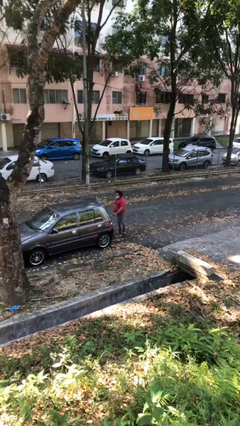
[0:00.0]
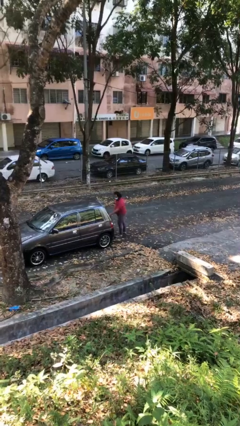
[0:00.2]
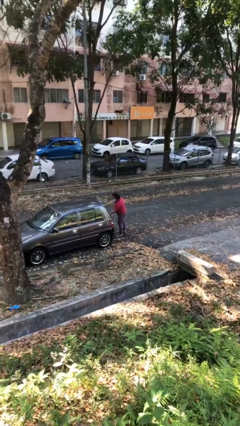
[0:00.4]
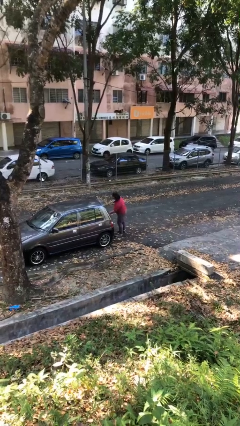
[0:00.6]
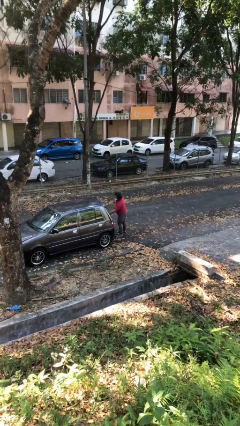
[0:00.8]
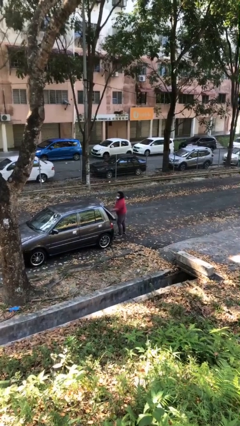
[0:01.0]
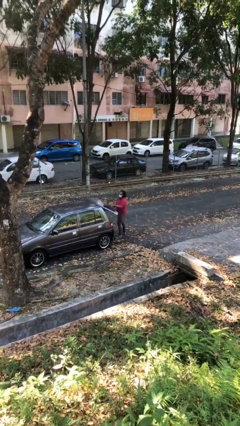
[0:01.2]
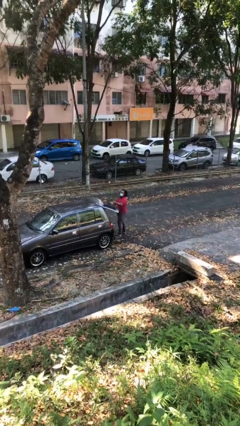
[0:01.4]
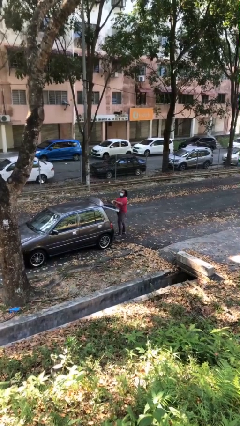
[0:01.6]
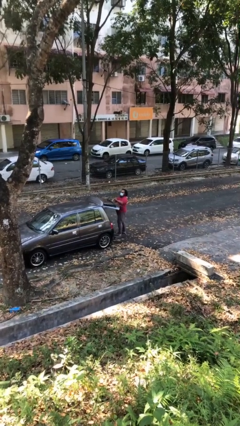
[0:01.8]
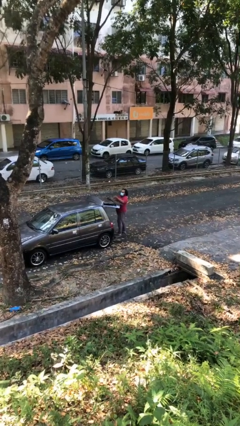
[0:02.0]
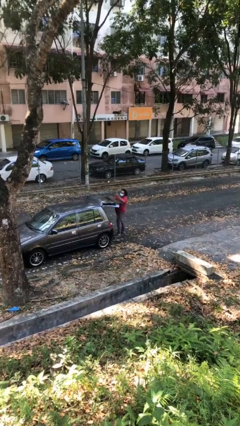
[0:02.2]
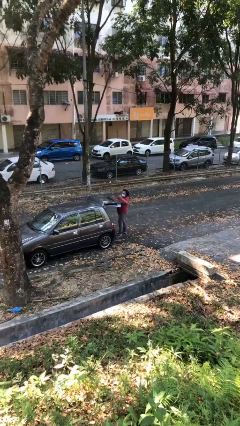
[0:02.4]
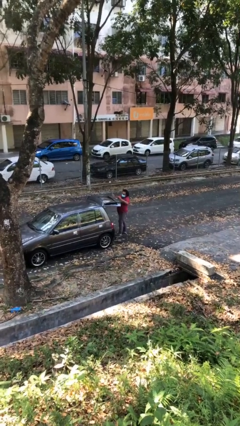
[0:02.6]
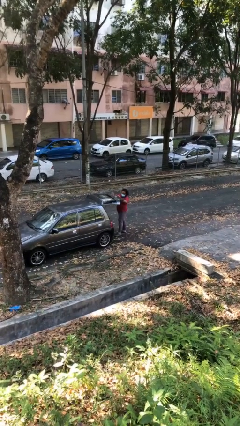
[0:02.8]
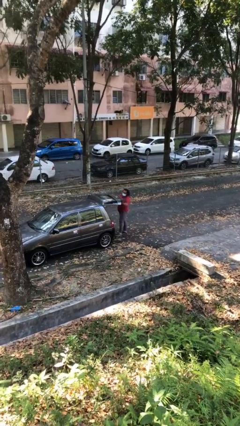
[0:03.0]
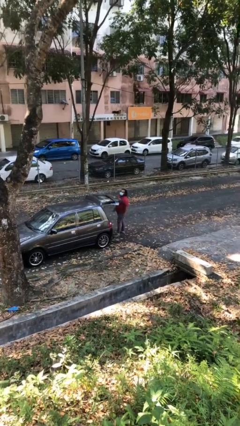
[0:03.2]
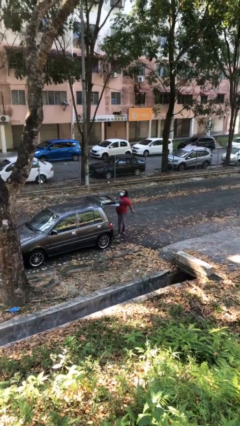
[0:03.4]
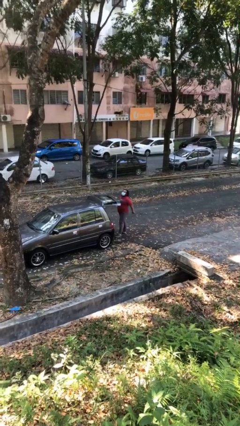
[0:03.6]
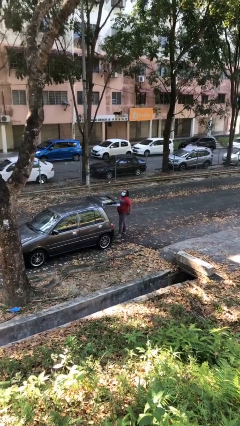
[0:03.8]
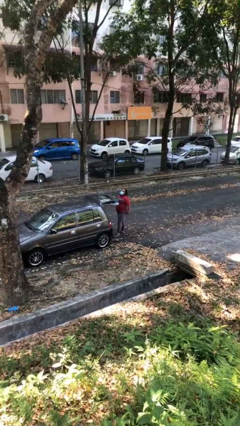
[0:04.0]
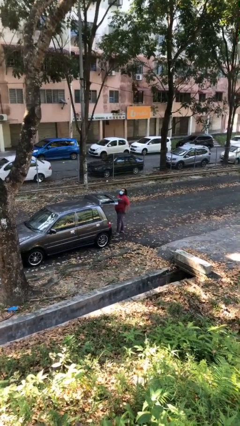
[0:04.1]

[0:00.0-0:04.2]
person opens car trunk

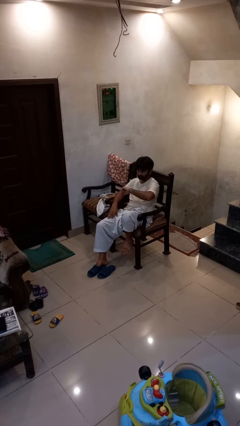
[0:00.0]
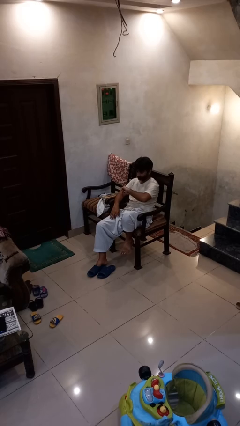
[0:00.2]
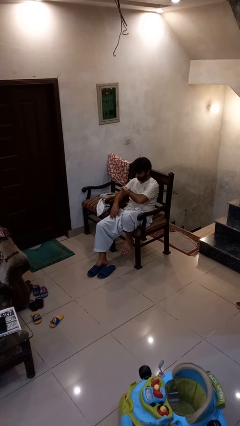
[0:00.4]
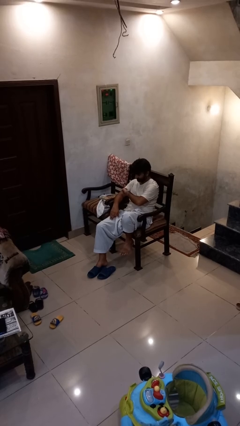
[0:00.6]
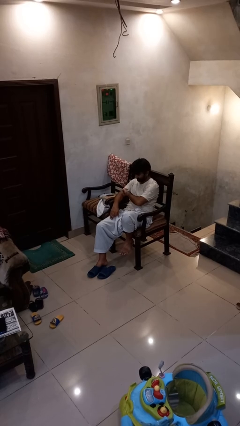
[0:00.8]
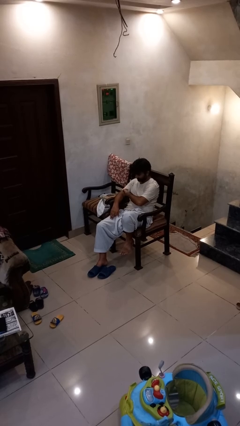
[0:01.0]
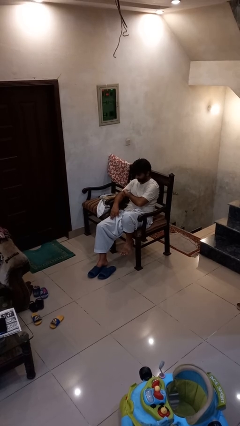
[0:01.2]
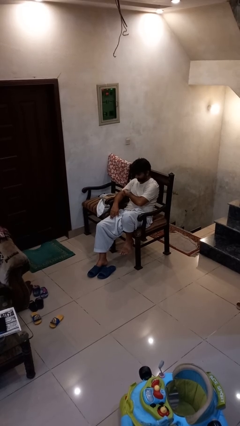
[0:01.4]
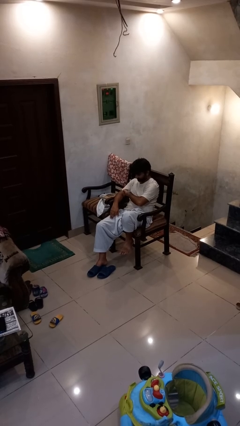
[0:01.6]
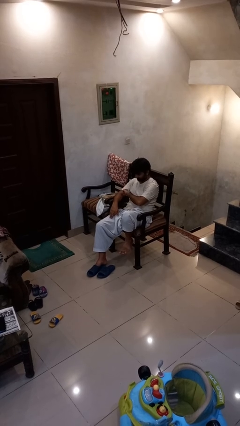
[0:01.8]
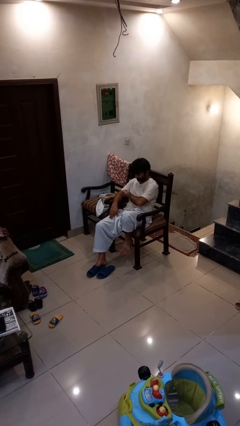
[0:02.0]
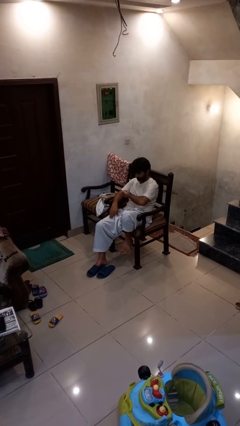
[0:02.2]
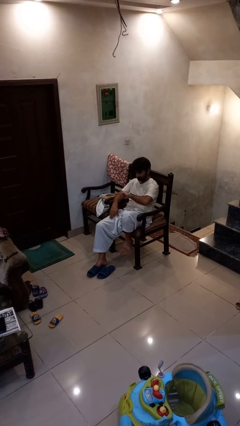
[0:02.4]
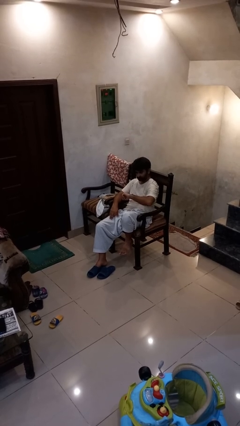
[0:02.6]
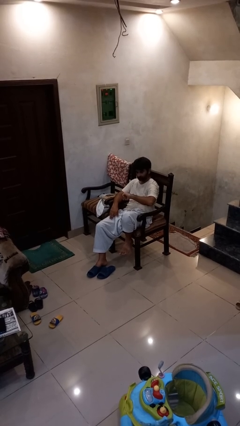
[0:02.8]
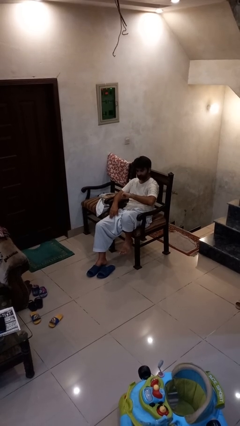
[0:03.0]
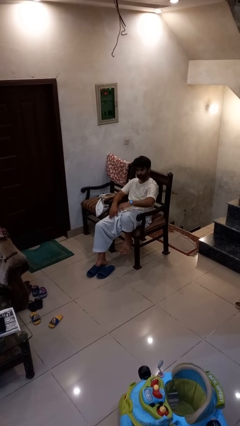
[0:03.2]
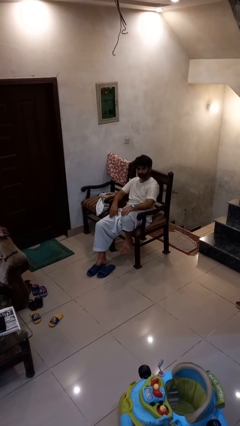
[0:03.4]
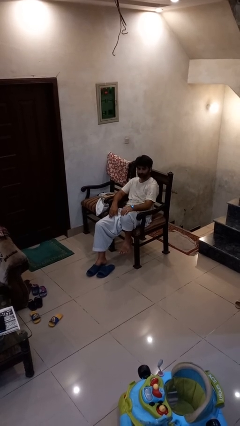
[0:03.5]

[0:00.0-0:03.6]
person looks at wristwatch

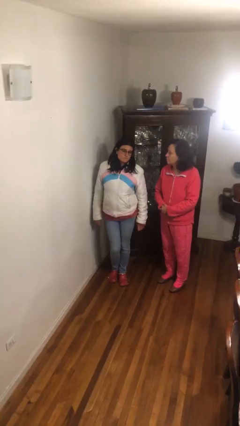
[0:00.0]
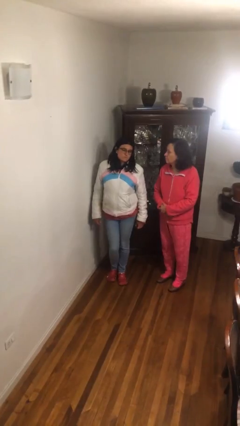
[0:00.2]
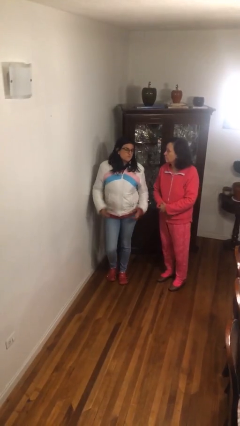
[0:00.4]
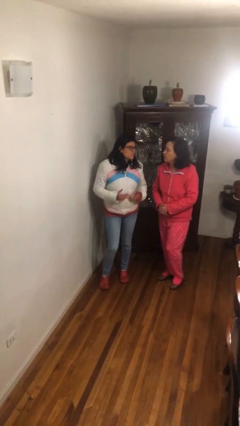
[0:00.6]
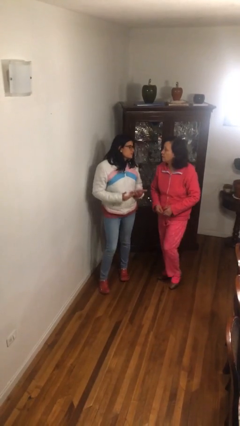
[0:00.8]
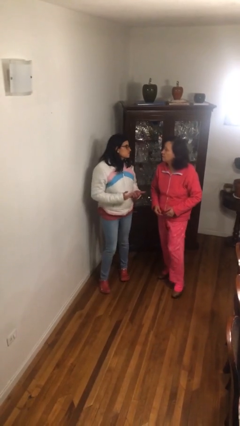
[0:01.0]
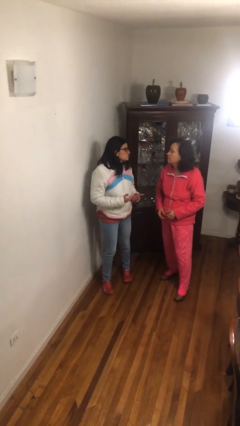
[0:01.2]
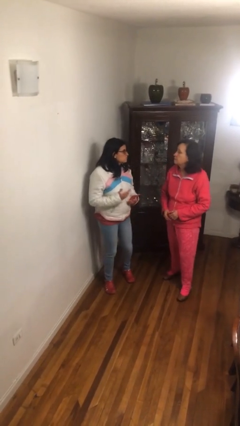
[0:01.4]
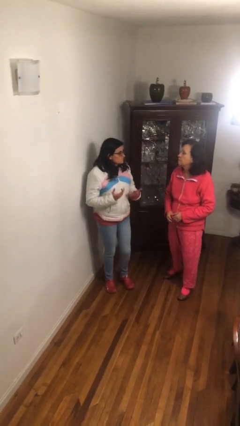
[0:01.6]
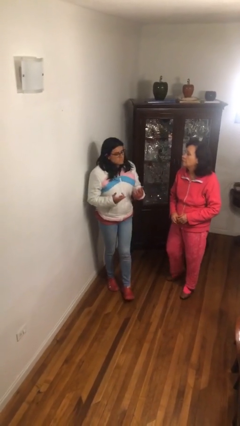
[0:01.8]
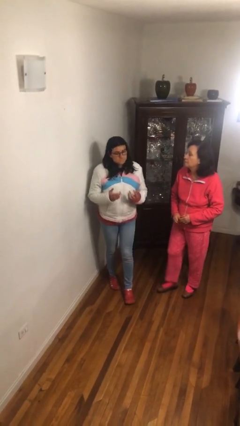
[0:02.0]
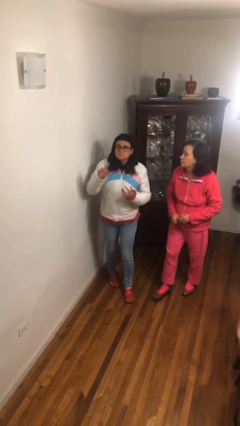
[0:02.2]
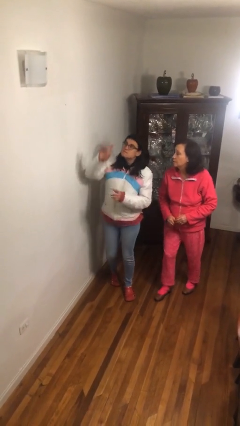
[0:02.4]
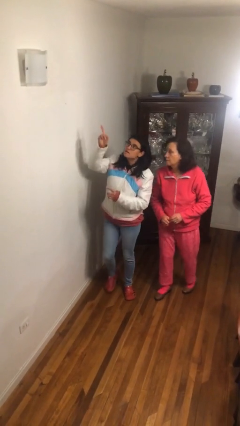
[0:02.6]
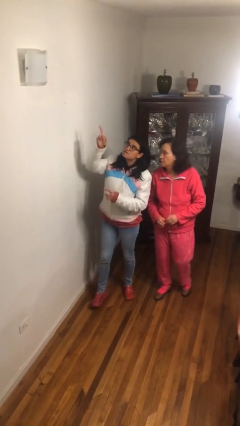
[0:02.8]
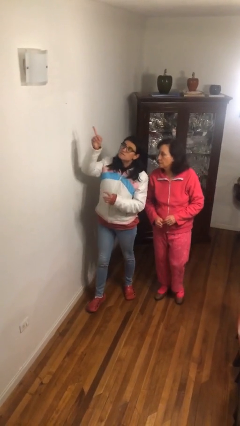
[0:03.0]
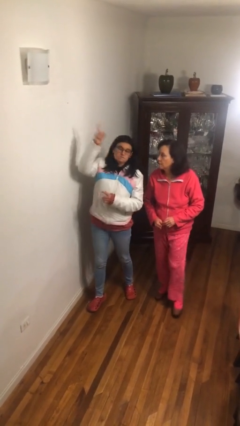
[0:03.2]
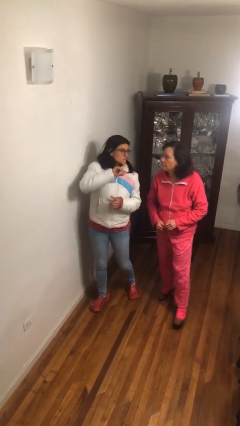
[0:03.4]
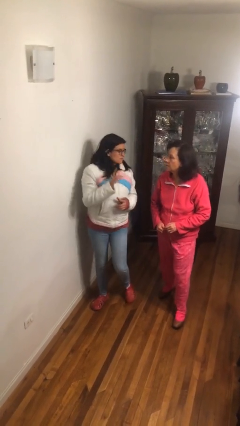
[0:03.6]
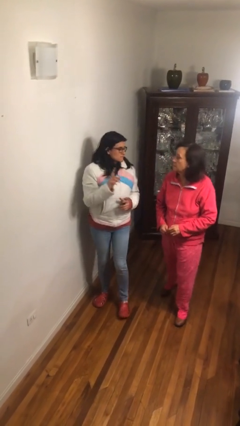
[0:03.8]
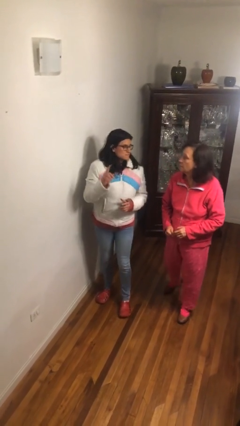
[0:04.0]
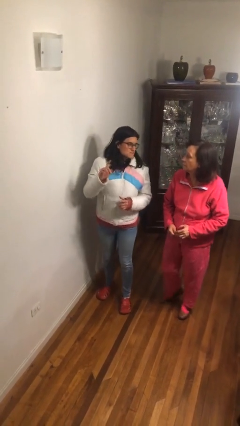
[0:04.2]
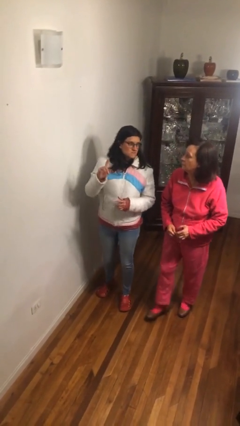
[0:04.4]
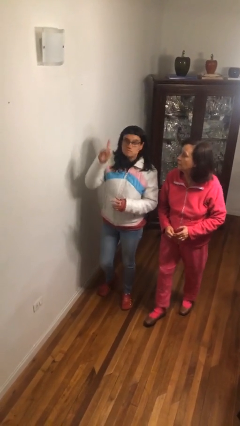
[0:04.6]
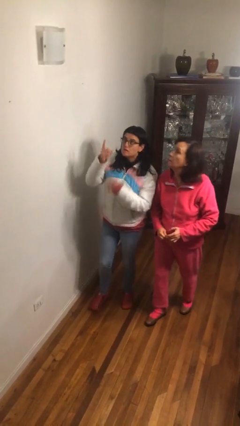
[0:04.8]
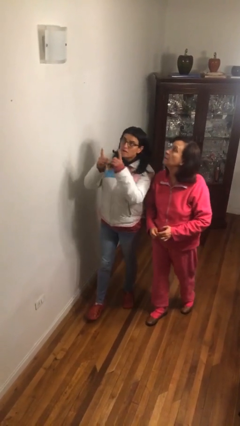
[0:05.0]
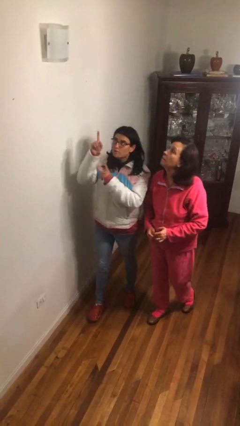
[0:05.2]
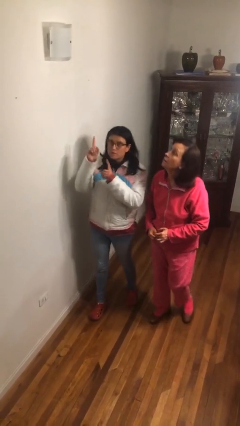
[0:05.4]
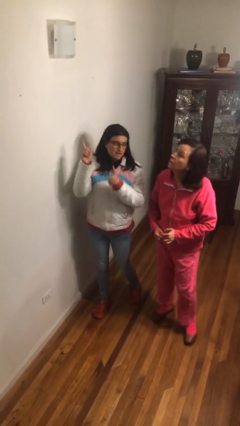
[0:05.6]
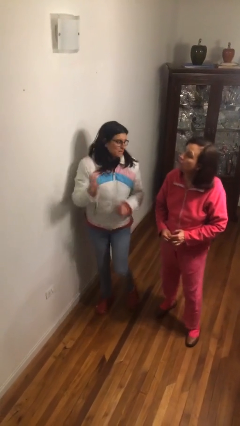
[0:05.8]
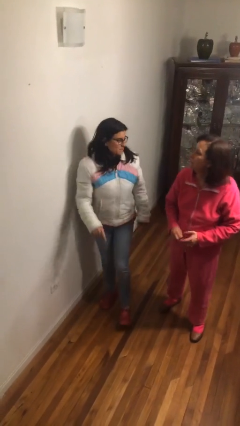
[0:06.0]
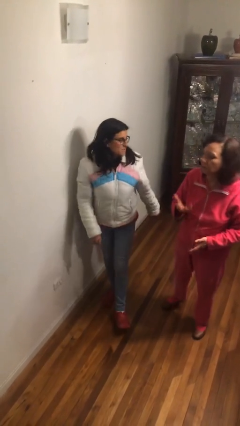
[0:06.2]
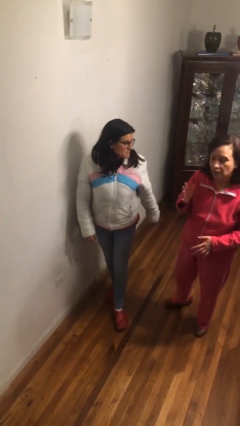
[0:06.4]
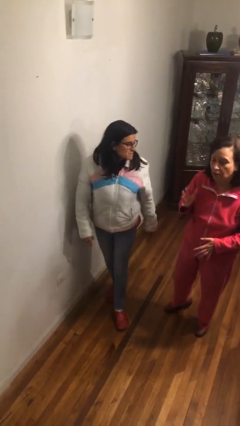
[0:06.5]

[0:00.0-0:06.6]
person talks to person

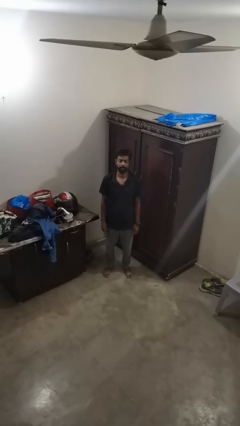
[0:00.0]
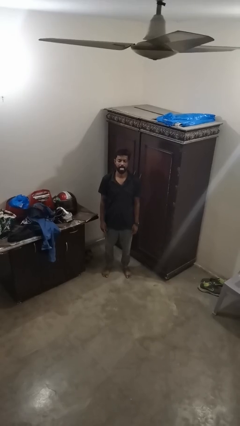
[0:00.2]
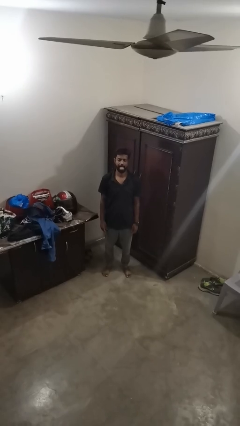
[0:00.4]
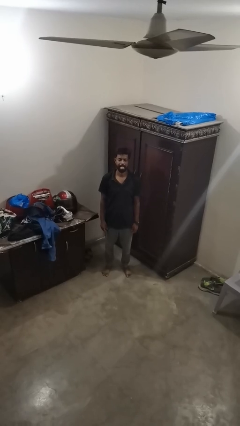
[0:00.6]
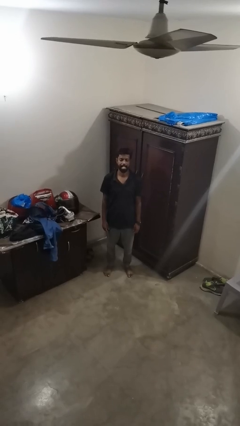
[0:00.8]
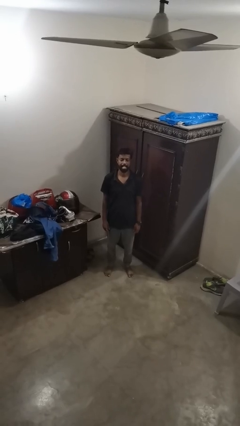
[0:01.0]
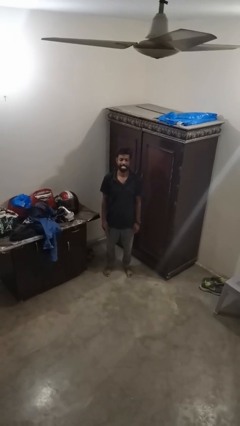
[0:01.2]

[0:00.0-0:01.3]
person sticks out tongue

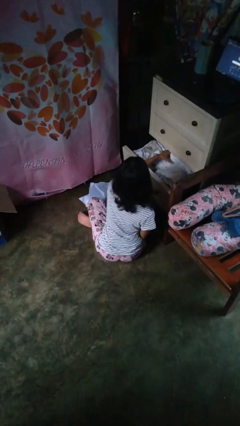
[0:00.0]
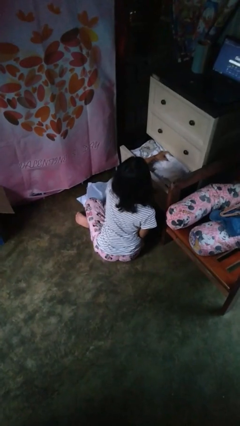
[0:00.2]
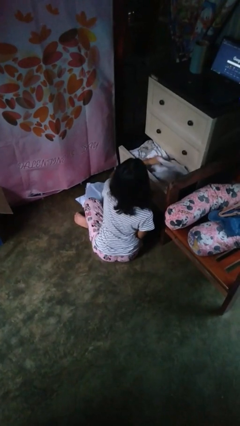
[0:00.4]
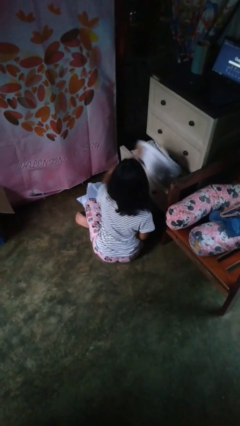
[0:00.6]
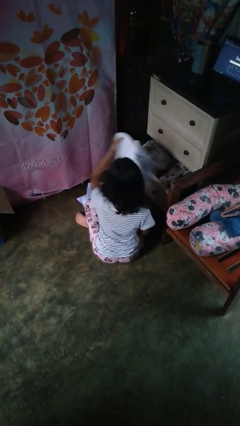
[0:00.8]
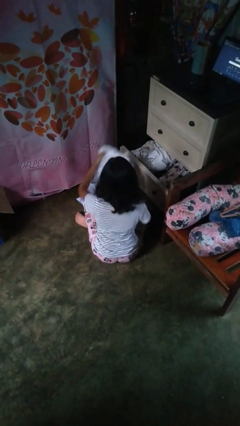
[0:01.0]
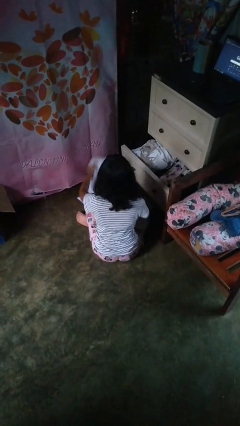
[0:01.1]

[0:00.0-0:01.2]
person takes clothes from dresser

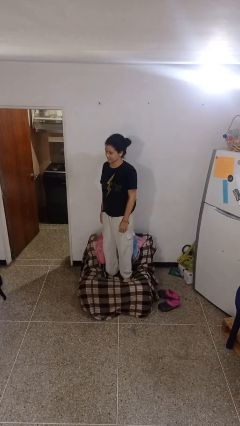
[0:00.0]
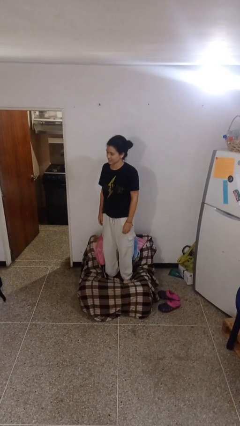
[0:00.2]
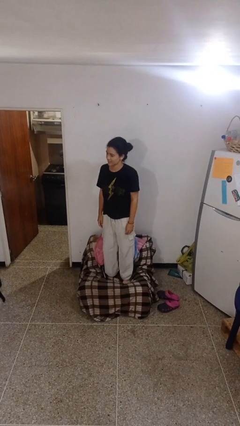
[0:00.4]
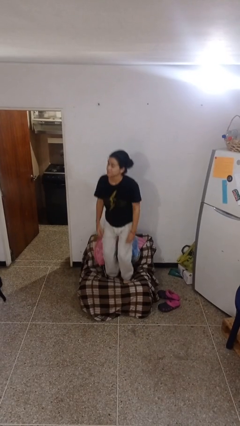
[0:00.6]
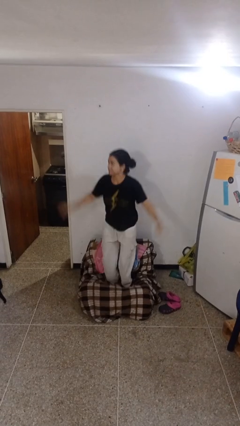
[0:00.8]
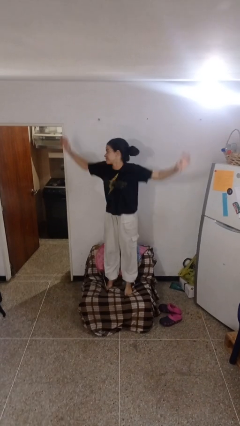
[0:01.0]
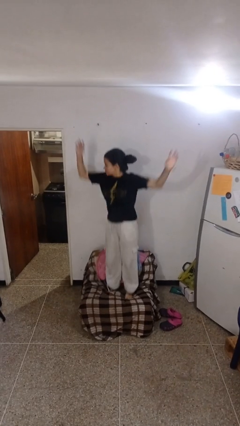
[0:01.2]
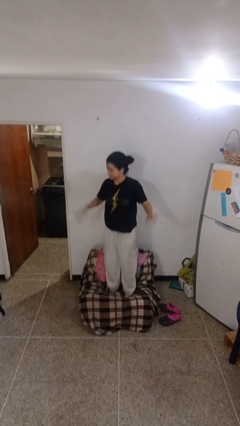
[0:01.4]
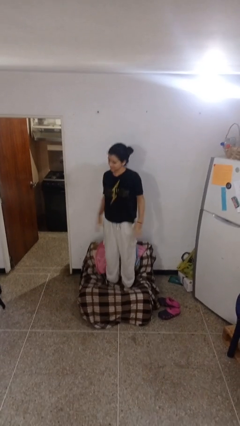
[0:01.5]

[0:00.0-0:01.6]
person jumps on couch
